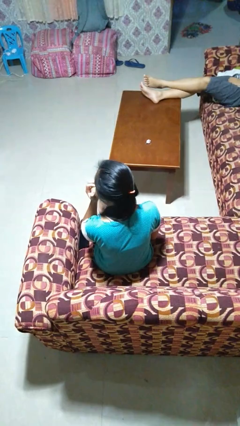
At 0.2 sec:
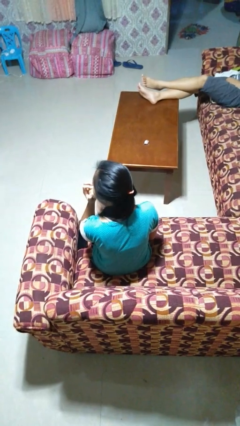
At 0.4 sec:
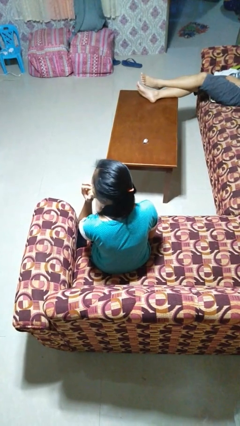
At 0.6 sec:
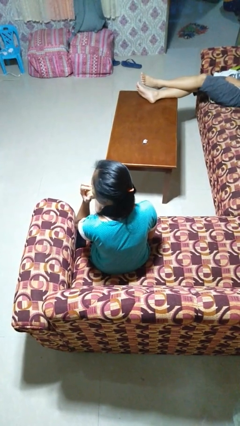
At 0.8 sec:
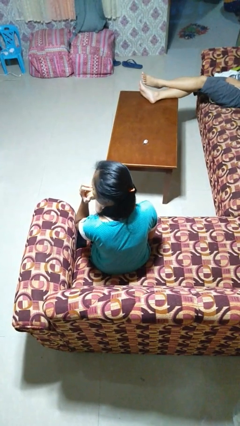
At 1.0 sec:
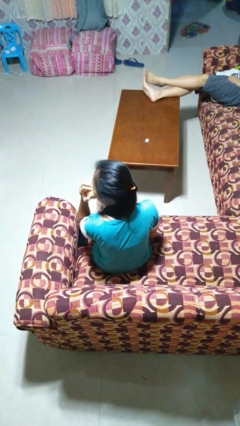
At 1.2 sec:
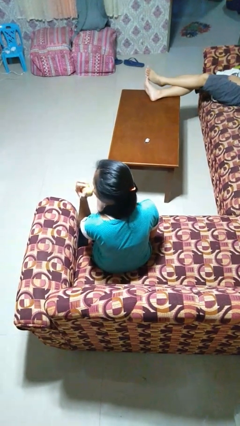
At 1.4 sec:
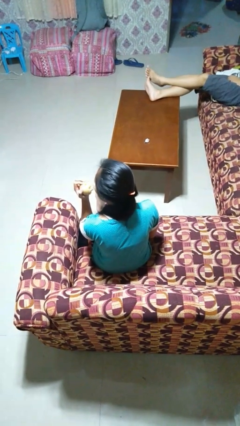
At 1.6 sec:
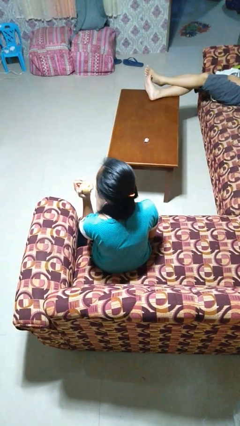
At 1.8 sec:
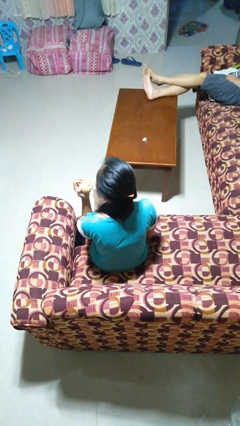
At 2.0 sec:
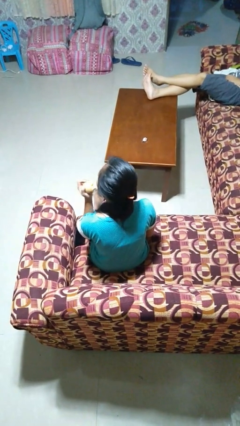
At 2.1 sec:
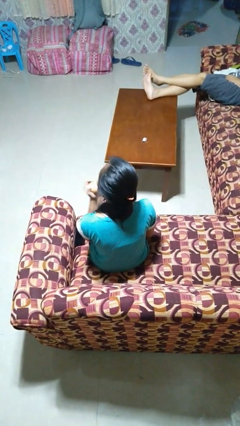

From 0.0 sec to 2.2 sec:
person eats apple

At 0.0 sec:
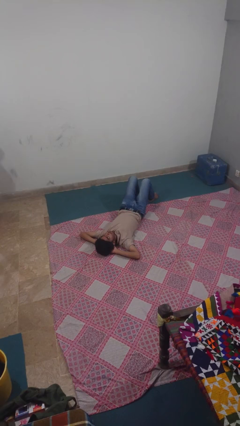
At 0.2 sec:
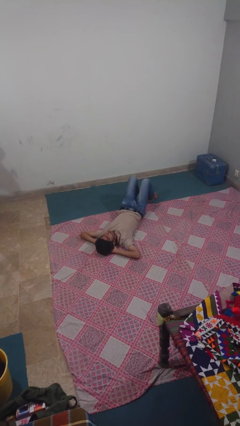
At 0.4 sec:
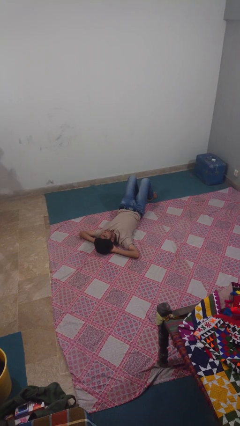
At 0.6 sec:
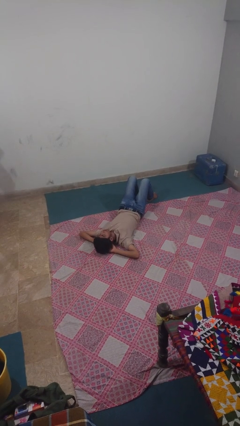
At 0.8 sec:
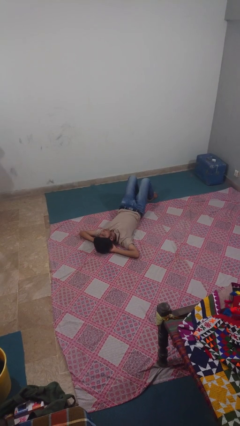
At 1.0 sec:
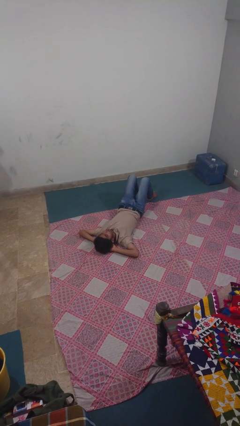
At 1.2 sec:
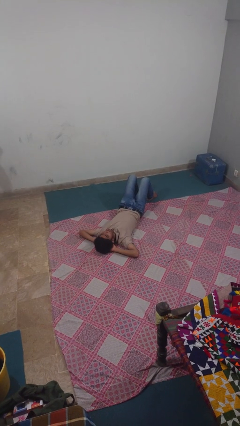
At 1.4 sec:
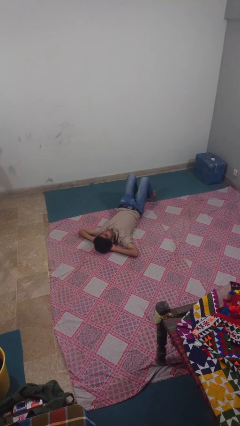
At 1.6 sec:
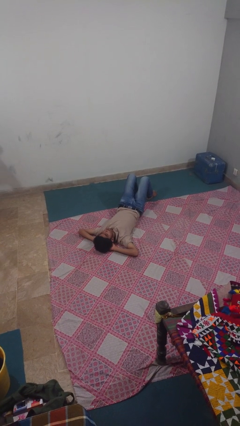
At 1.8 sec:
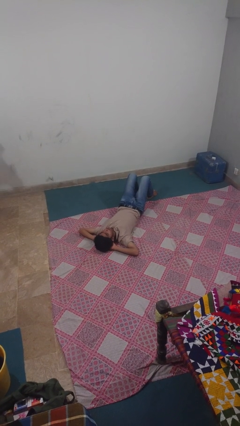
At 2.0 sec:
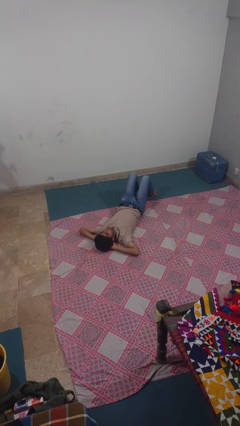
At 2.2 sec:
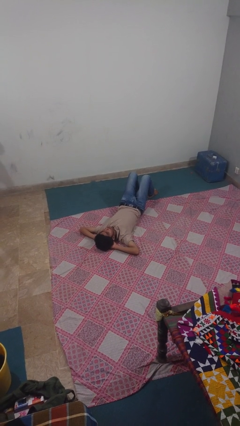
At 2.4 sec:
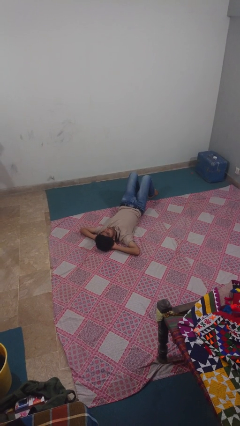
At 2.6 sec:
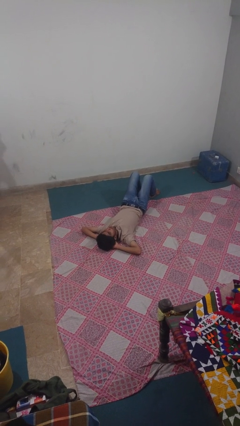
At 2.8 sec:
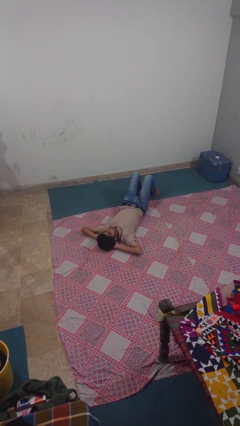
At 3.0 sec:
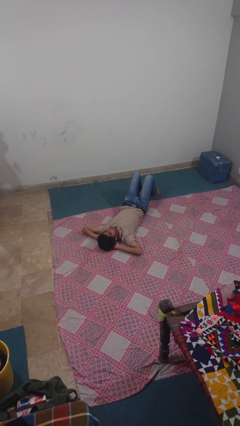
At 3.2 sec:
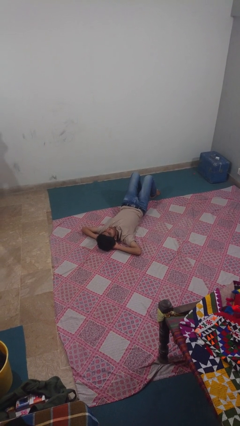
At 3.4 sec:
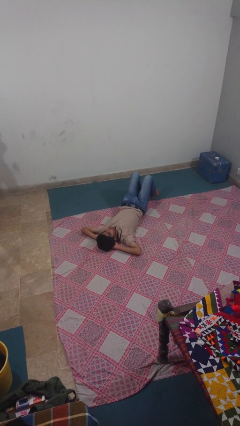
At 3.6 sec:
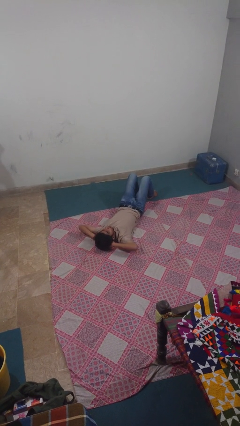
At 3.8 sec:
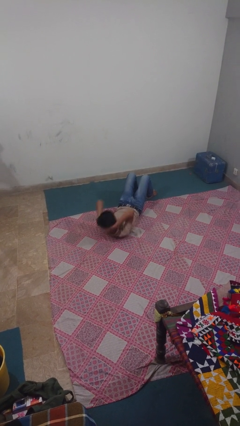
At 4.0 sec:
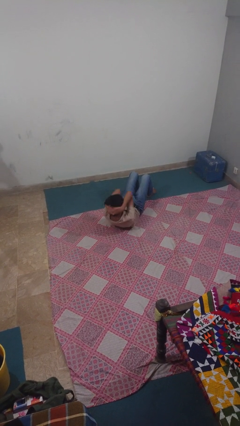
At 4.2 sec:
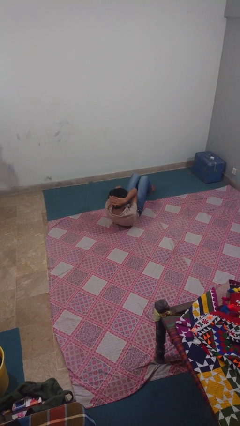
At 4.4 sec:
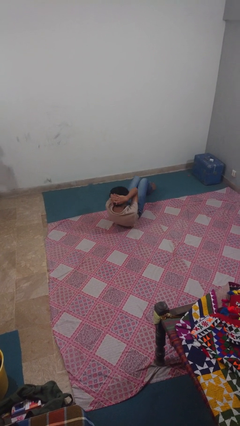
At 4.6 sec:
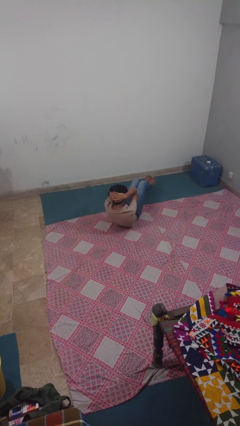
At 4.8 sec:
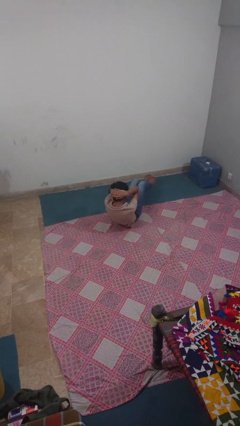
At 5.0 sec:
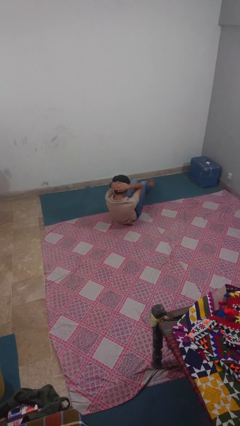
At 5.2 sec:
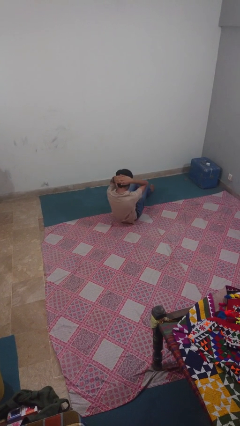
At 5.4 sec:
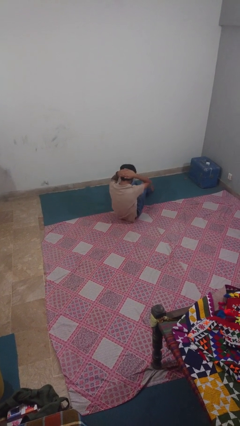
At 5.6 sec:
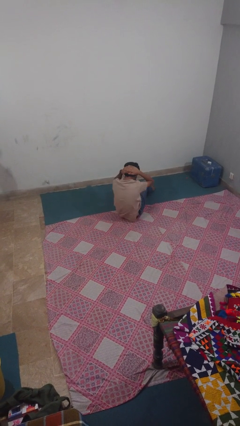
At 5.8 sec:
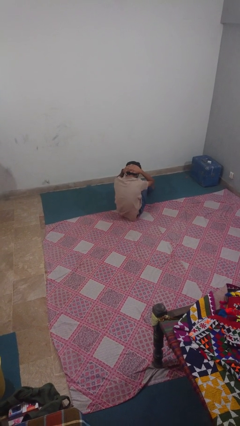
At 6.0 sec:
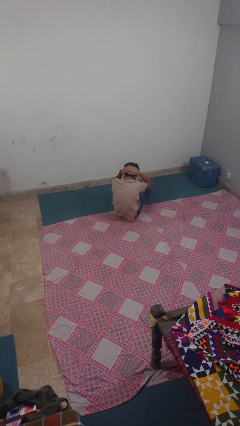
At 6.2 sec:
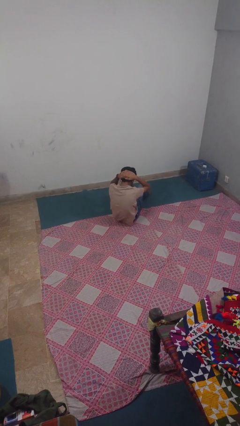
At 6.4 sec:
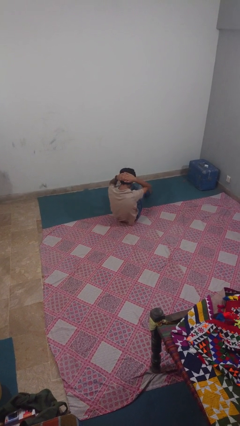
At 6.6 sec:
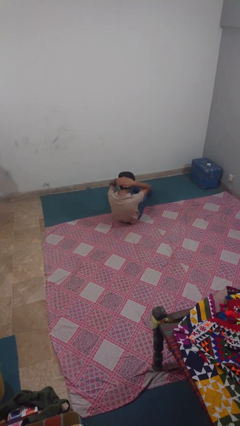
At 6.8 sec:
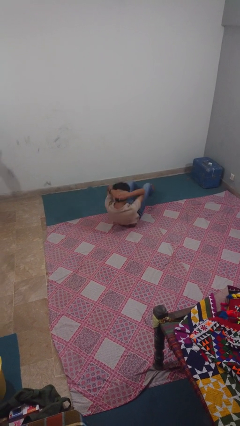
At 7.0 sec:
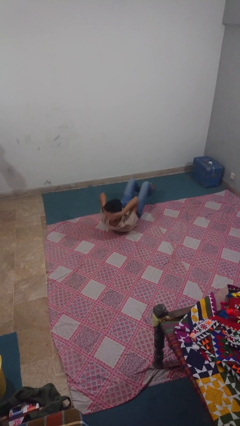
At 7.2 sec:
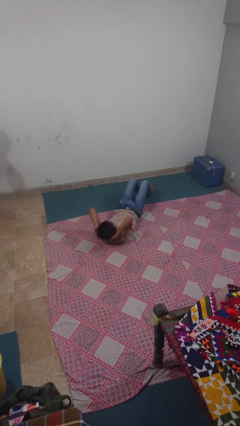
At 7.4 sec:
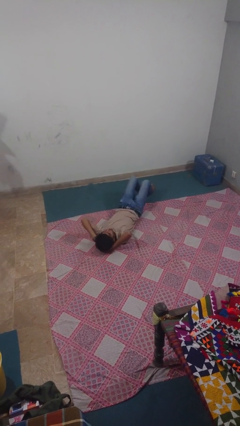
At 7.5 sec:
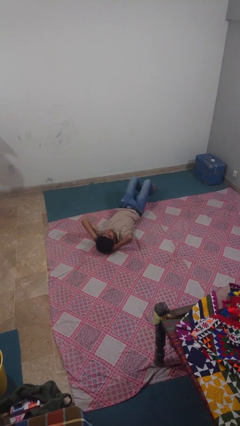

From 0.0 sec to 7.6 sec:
person exercises with situp

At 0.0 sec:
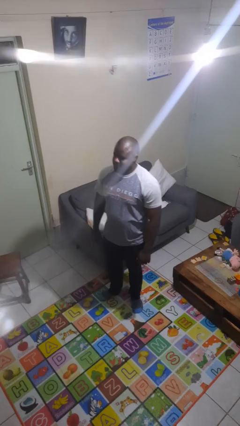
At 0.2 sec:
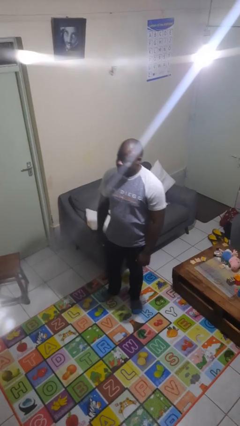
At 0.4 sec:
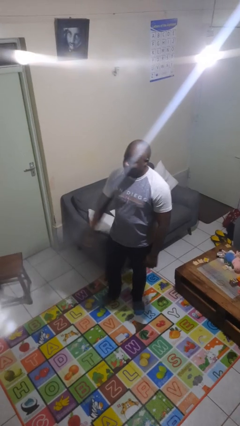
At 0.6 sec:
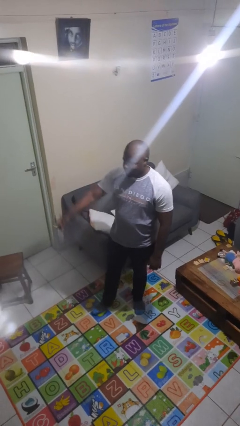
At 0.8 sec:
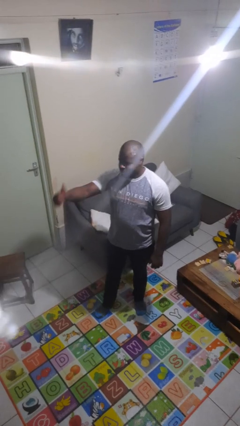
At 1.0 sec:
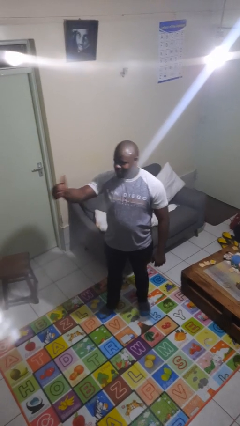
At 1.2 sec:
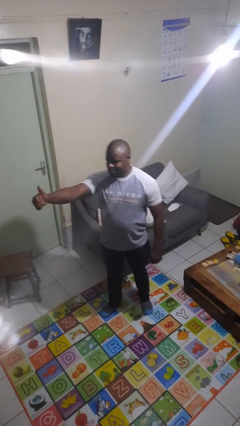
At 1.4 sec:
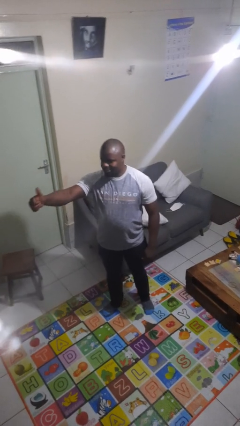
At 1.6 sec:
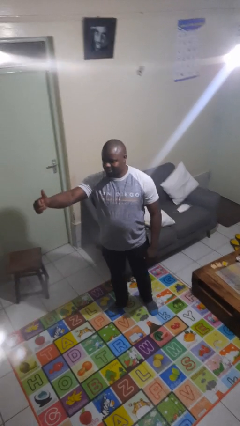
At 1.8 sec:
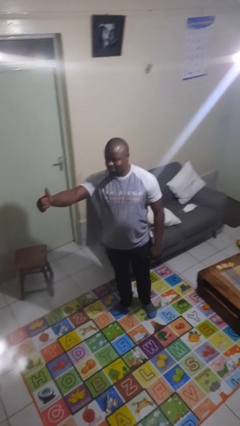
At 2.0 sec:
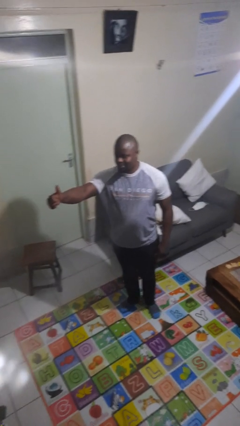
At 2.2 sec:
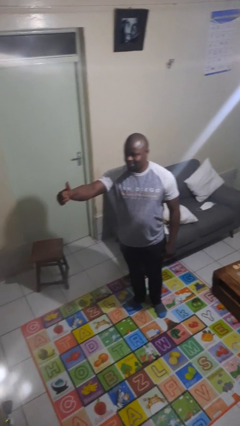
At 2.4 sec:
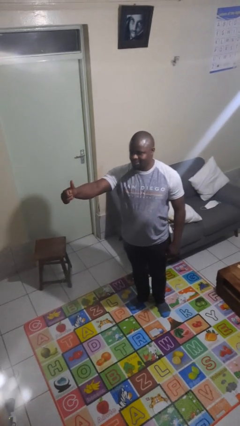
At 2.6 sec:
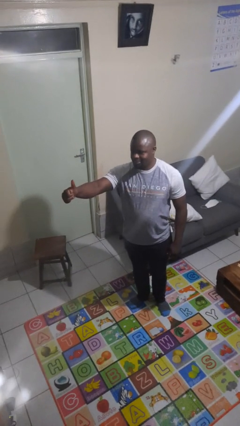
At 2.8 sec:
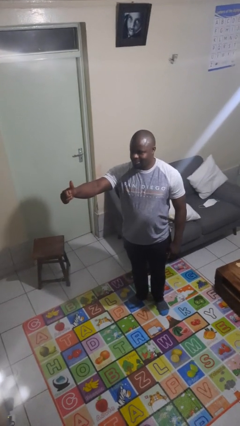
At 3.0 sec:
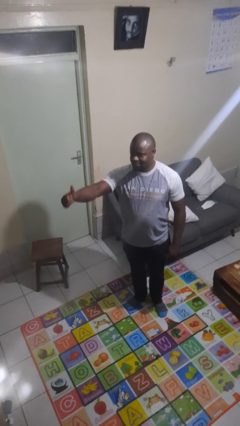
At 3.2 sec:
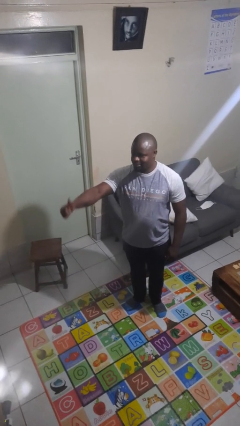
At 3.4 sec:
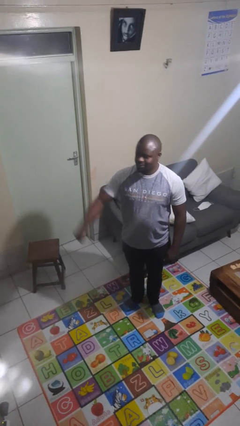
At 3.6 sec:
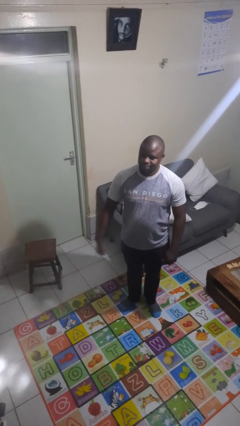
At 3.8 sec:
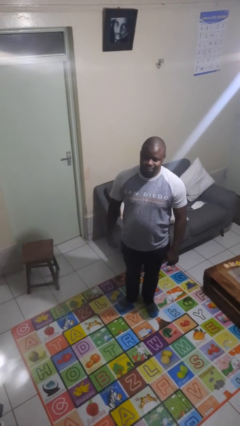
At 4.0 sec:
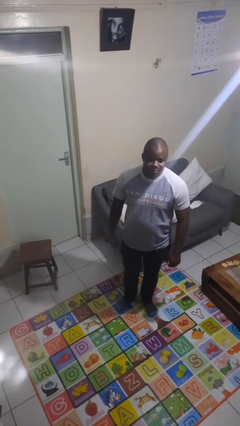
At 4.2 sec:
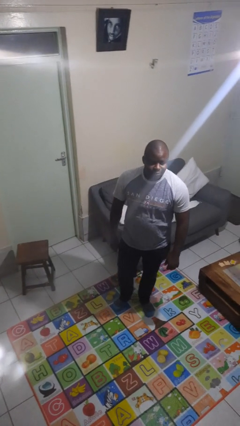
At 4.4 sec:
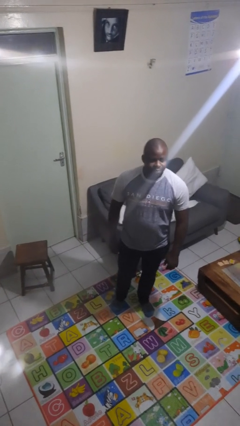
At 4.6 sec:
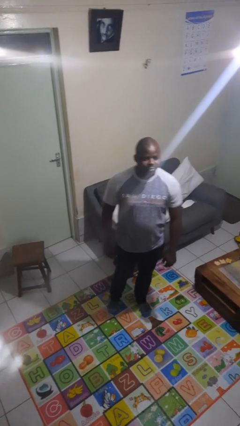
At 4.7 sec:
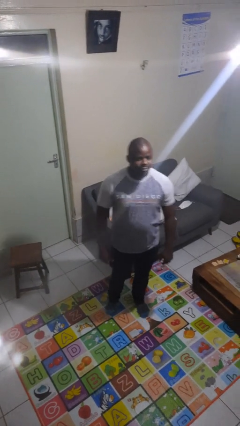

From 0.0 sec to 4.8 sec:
person gestures thumbs up

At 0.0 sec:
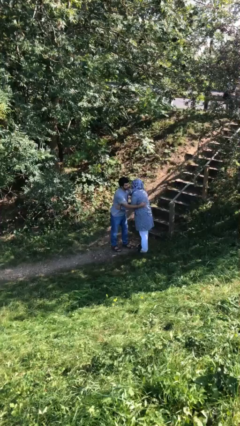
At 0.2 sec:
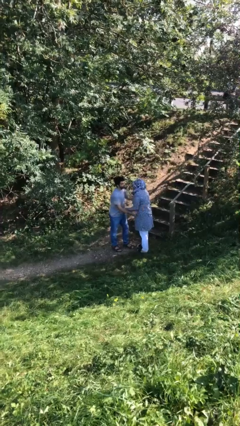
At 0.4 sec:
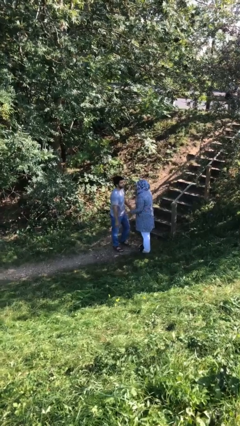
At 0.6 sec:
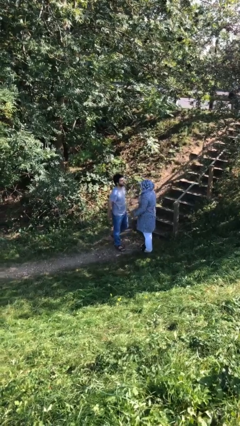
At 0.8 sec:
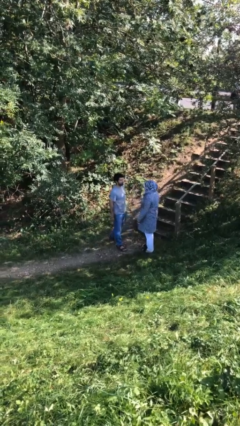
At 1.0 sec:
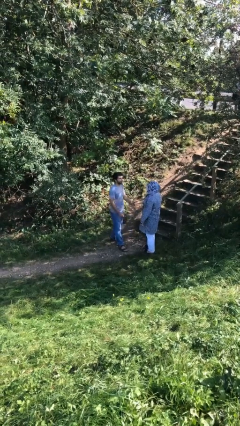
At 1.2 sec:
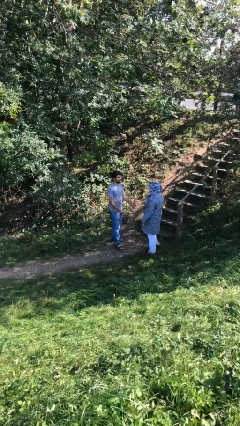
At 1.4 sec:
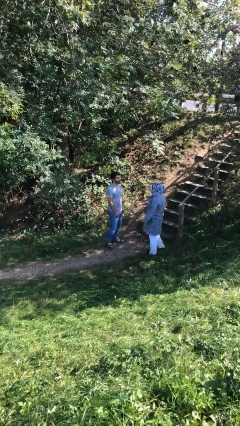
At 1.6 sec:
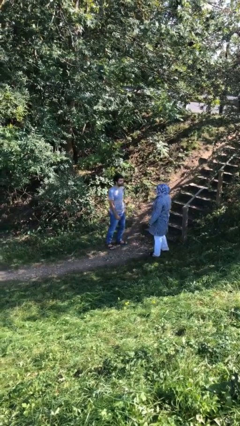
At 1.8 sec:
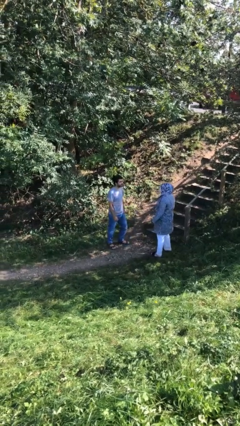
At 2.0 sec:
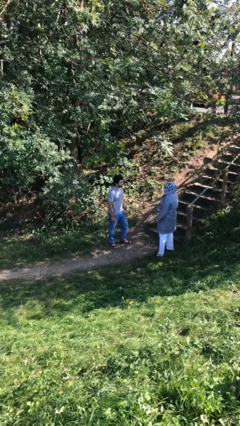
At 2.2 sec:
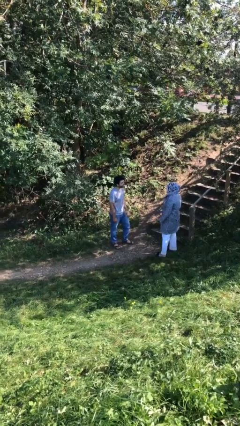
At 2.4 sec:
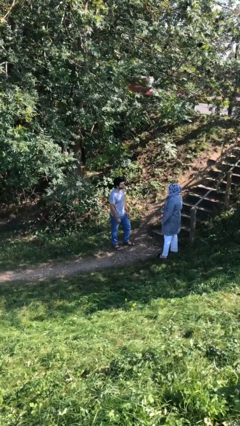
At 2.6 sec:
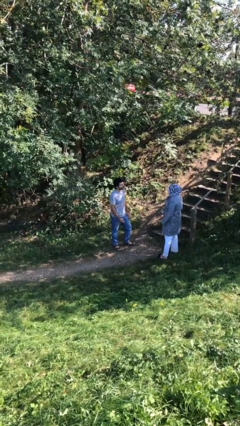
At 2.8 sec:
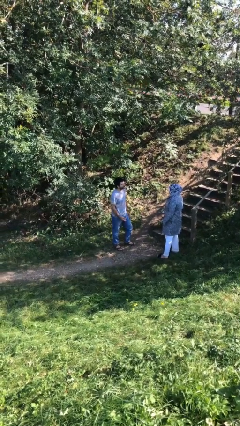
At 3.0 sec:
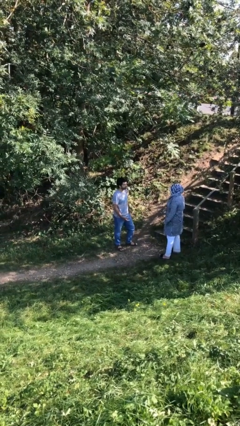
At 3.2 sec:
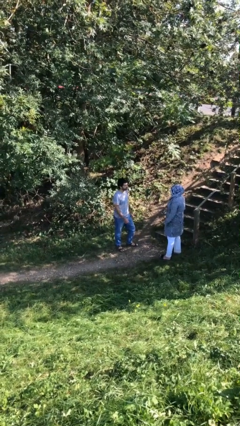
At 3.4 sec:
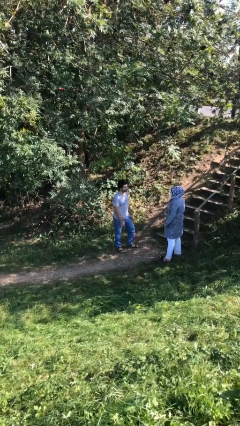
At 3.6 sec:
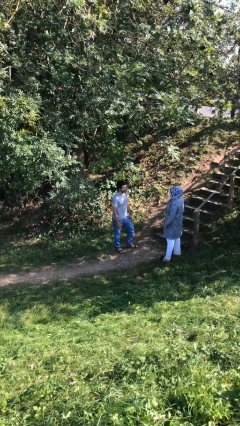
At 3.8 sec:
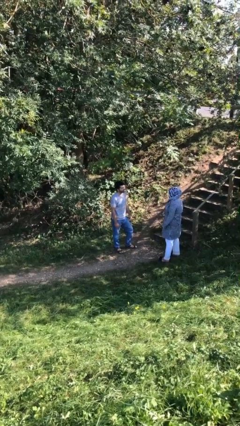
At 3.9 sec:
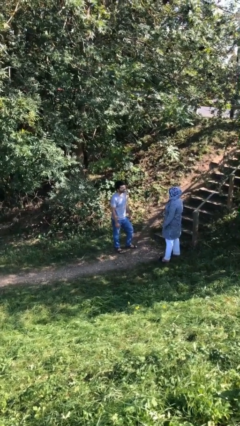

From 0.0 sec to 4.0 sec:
person talks to person
